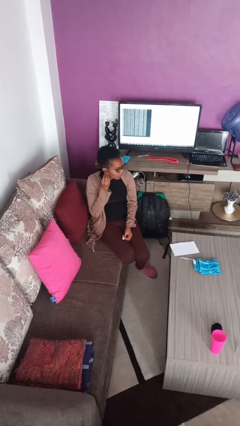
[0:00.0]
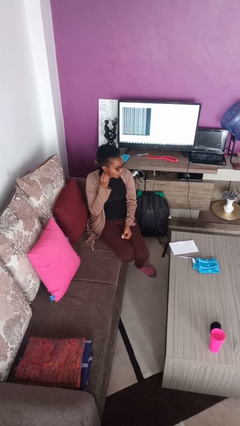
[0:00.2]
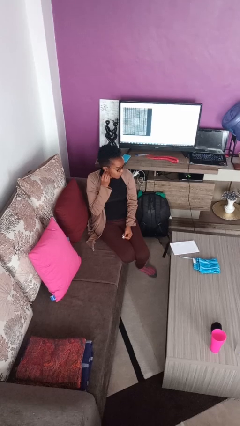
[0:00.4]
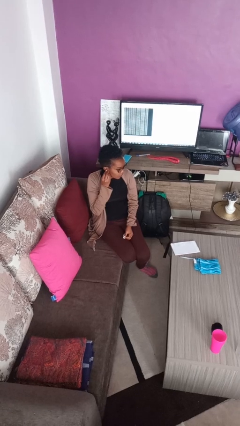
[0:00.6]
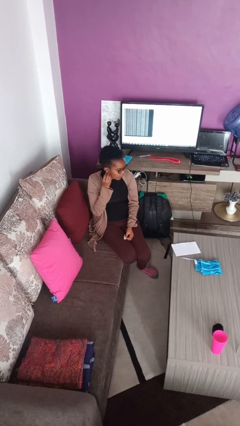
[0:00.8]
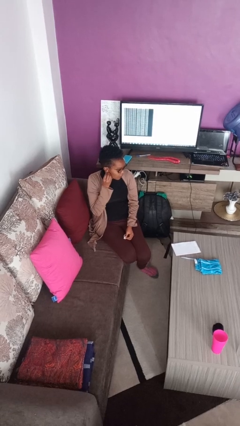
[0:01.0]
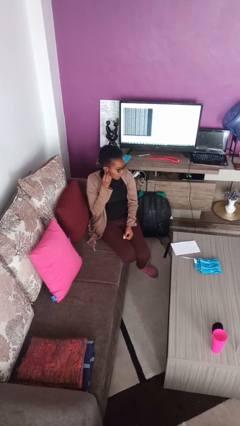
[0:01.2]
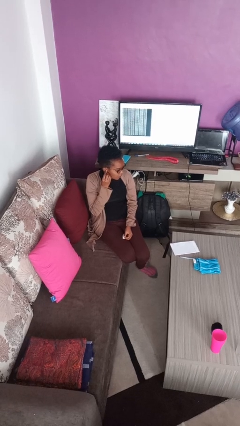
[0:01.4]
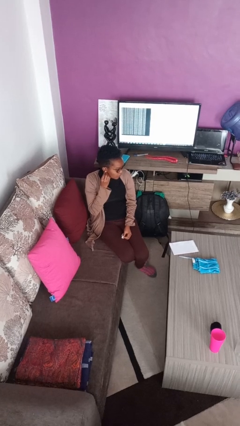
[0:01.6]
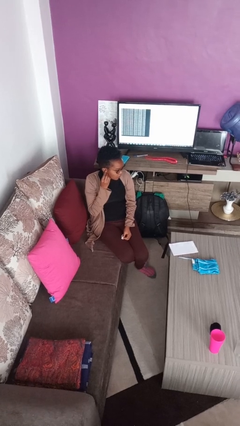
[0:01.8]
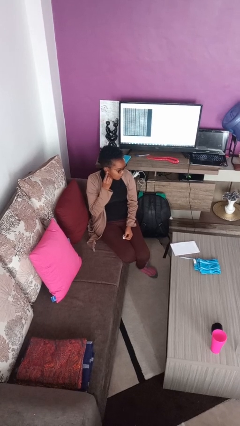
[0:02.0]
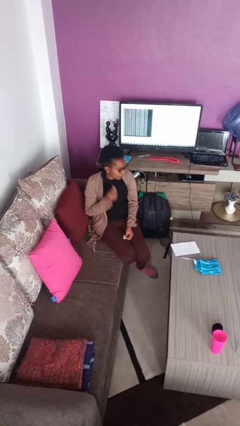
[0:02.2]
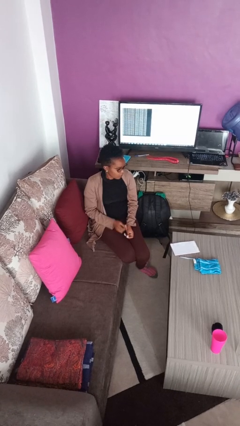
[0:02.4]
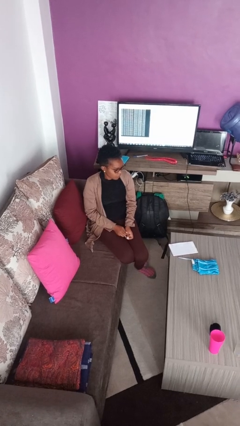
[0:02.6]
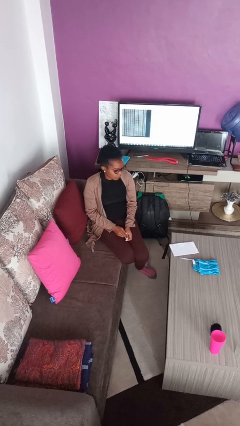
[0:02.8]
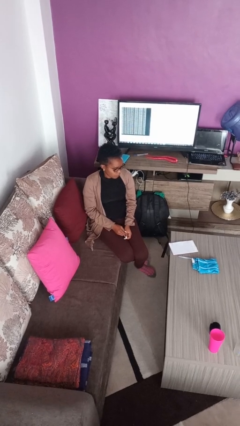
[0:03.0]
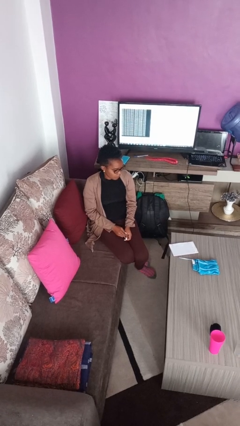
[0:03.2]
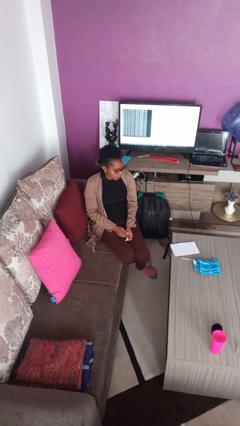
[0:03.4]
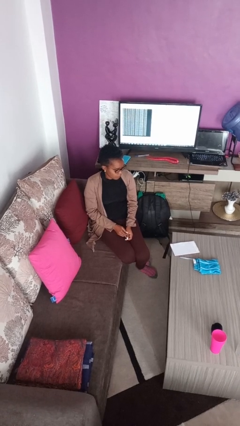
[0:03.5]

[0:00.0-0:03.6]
person puts on earrings

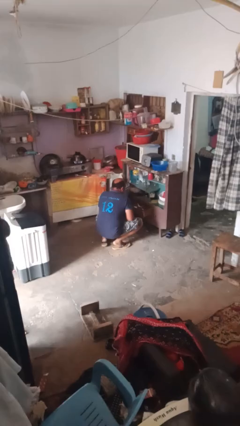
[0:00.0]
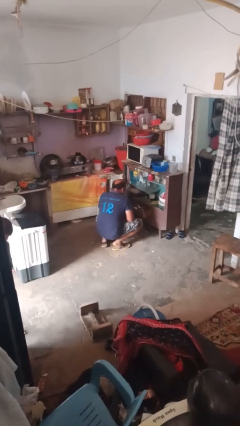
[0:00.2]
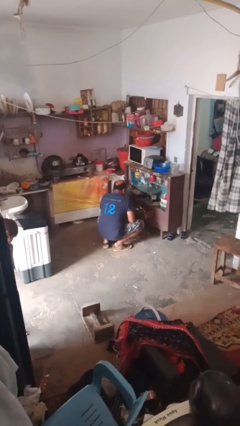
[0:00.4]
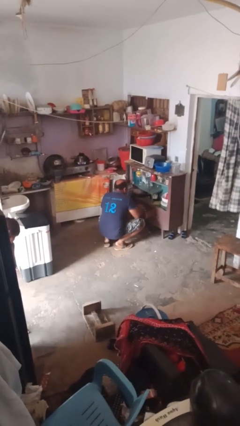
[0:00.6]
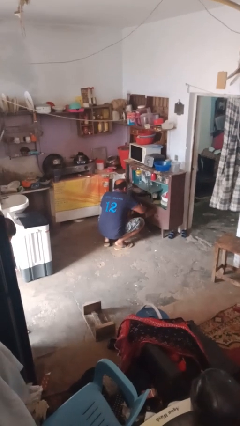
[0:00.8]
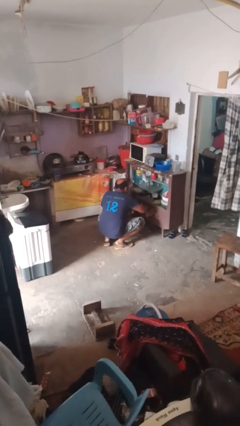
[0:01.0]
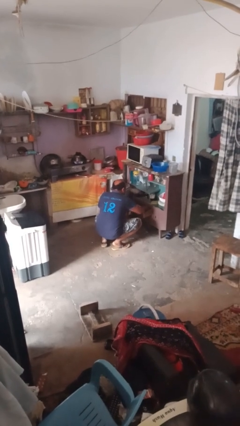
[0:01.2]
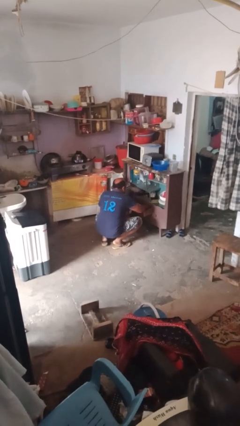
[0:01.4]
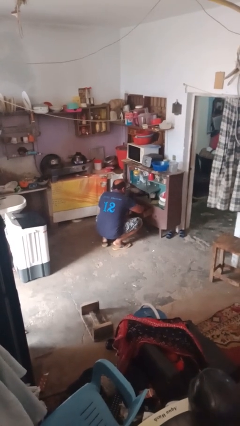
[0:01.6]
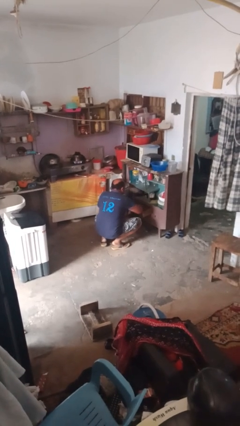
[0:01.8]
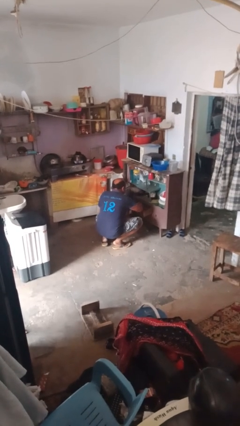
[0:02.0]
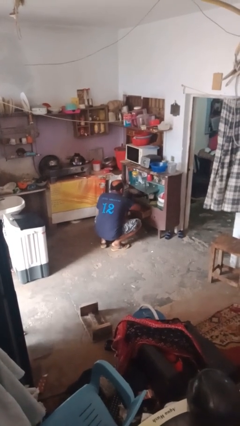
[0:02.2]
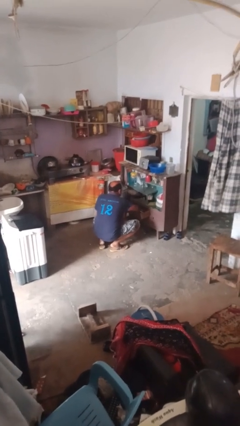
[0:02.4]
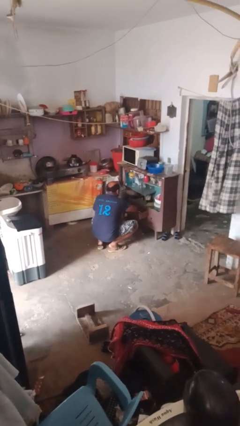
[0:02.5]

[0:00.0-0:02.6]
person searches in kitchen drawer

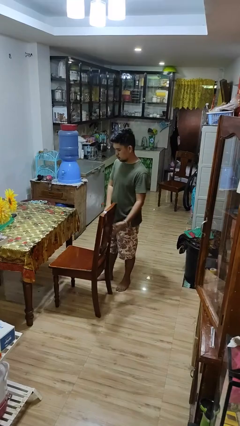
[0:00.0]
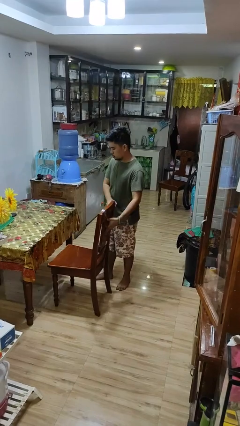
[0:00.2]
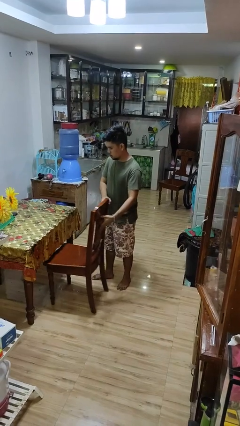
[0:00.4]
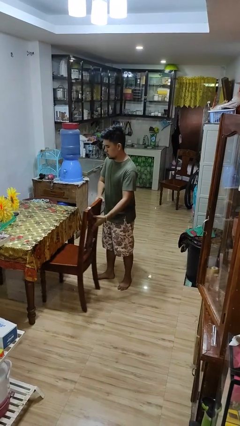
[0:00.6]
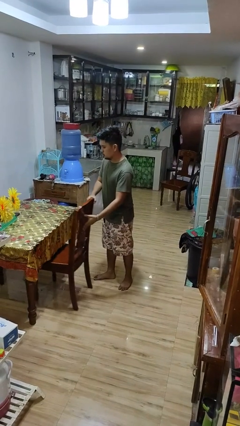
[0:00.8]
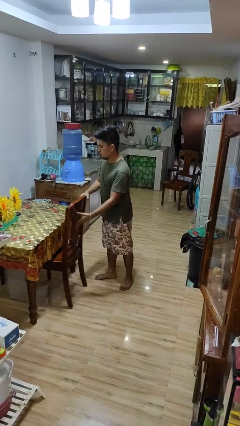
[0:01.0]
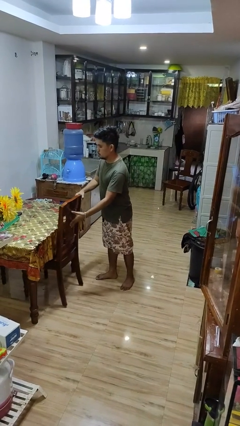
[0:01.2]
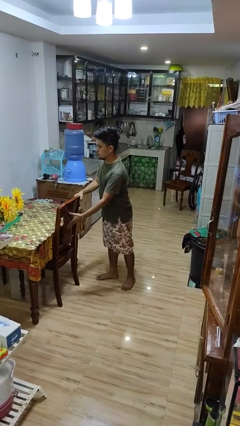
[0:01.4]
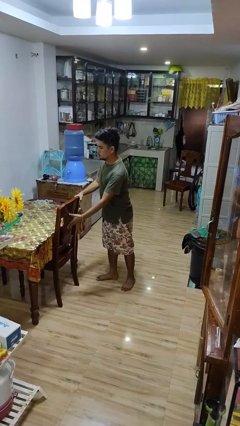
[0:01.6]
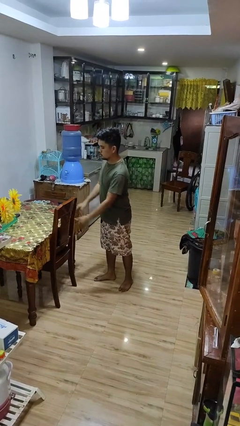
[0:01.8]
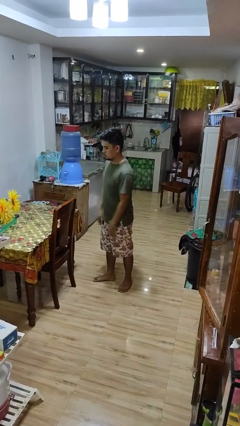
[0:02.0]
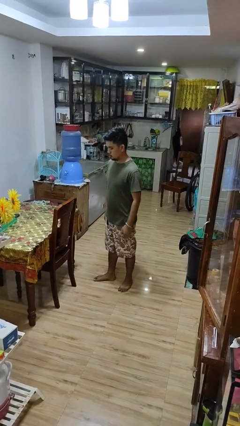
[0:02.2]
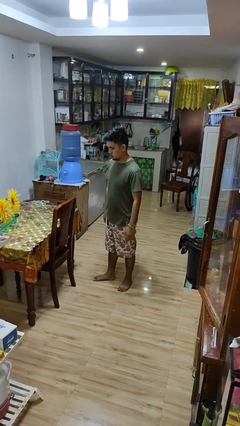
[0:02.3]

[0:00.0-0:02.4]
person pushes in chair

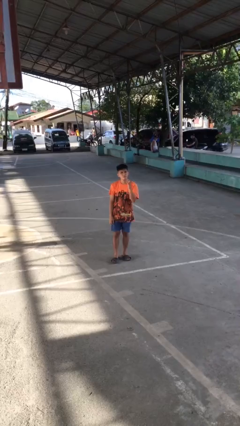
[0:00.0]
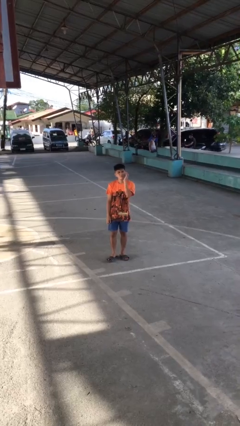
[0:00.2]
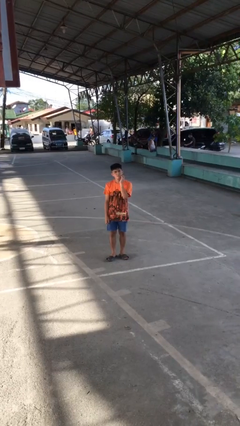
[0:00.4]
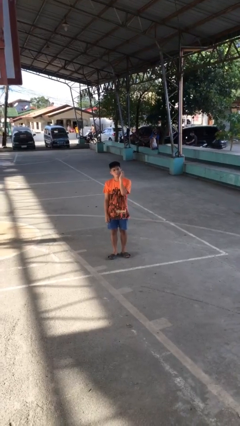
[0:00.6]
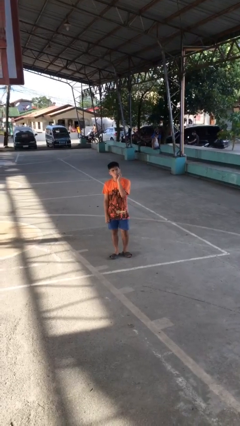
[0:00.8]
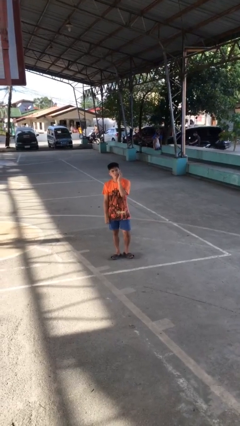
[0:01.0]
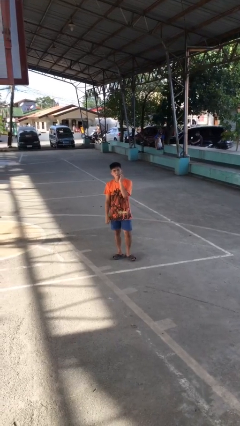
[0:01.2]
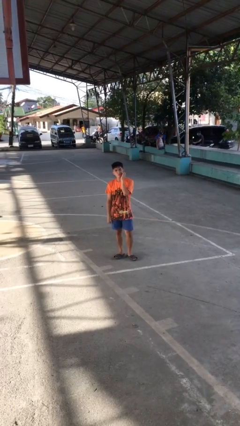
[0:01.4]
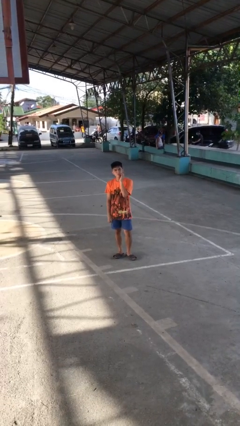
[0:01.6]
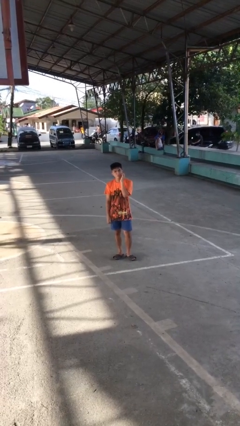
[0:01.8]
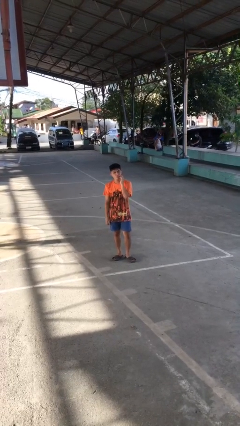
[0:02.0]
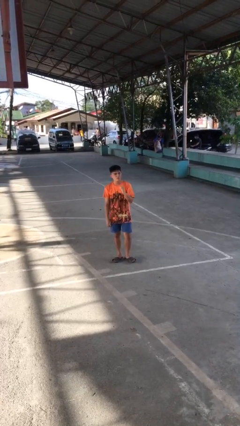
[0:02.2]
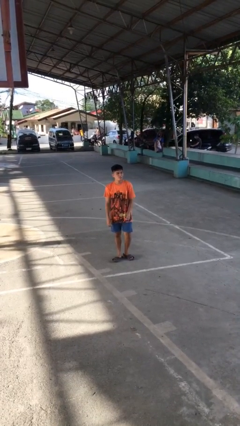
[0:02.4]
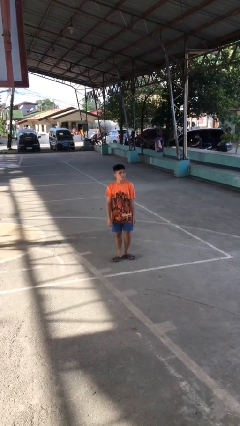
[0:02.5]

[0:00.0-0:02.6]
person scratches face

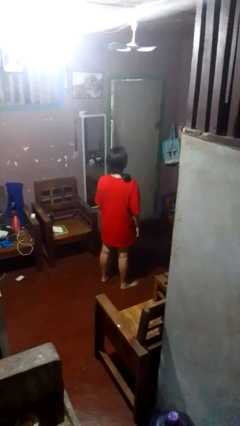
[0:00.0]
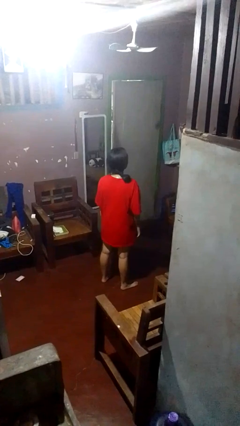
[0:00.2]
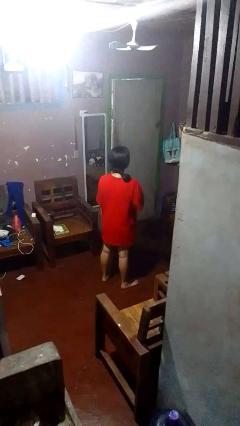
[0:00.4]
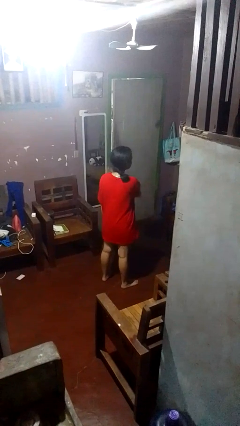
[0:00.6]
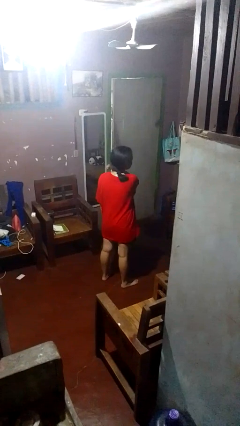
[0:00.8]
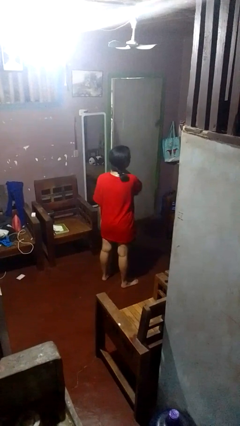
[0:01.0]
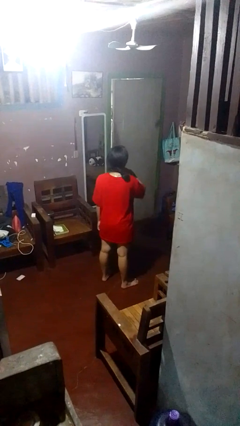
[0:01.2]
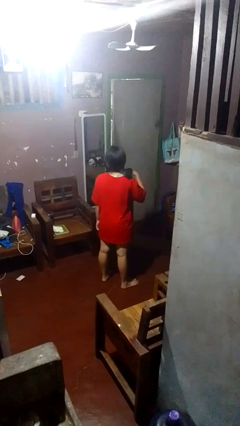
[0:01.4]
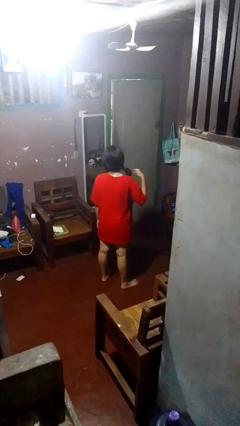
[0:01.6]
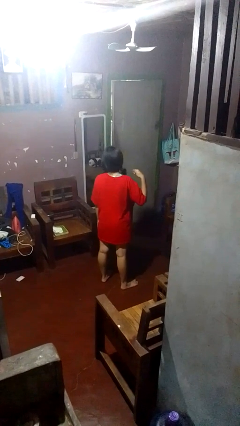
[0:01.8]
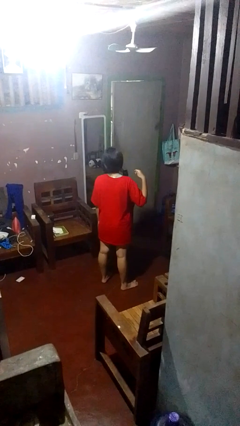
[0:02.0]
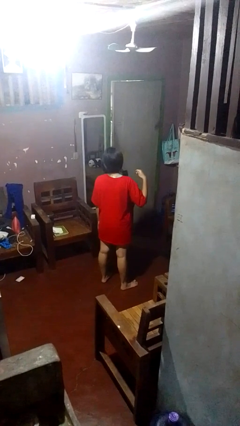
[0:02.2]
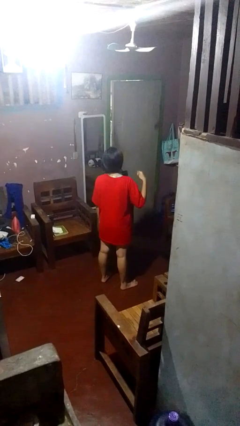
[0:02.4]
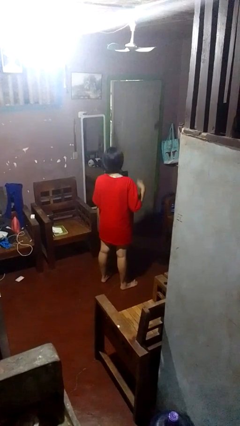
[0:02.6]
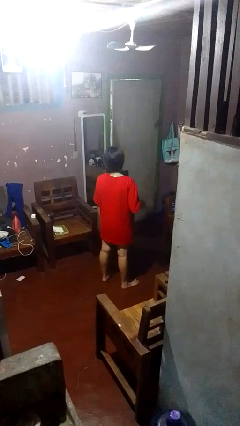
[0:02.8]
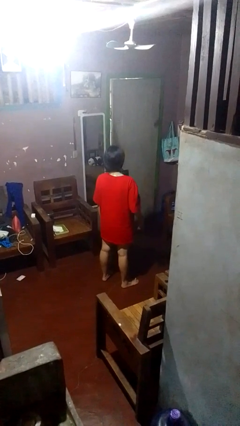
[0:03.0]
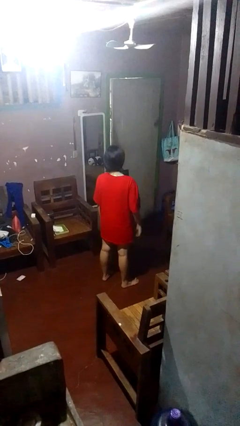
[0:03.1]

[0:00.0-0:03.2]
person gestures cut

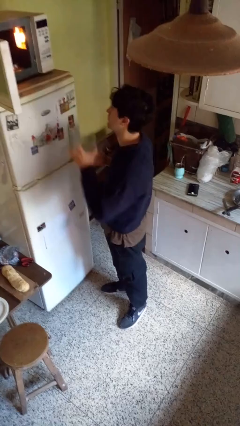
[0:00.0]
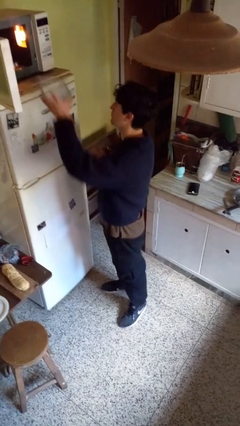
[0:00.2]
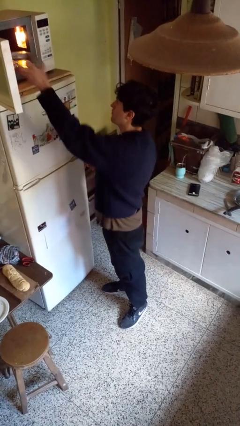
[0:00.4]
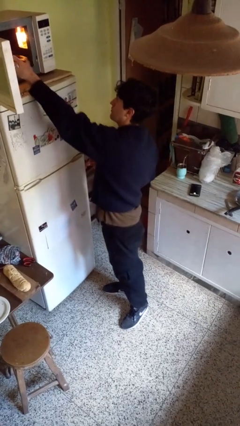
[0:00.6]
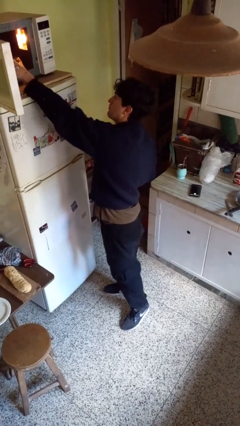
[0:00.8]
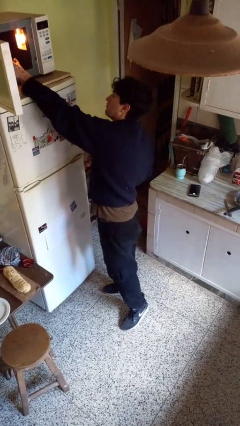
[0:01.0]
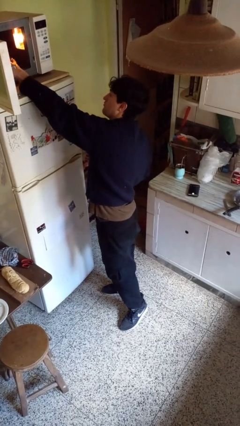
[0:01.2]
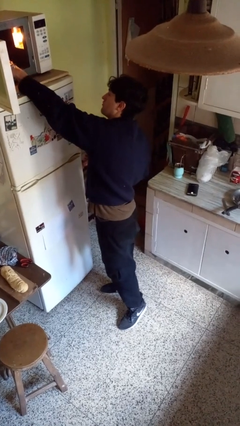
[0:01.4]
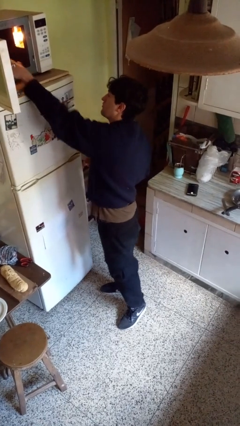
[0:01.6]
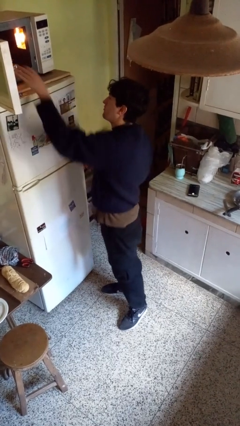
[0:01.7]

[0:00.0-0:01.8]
person puts object into microwave

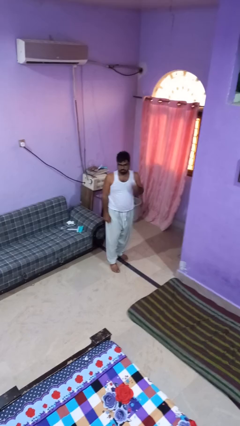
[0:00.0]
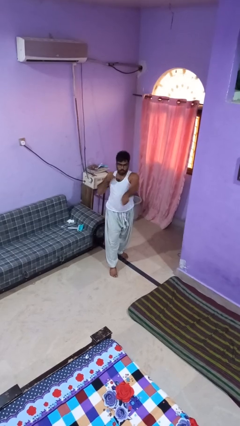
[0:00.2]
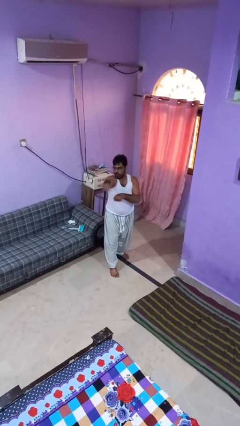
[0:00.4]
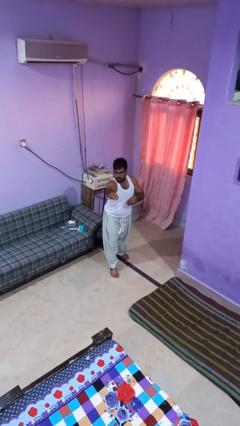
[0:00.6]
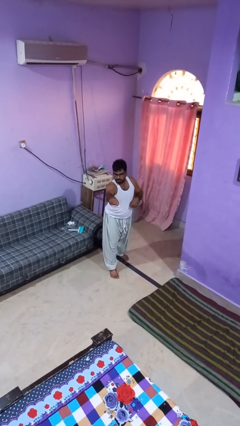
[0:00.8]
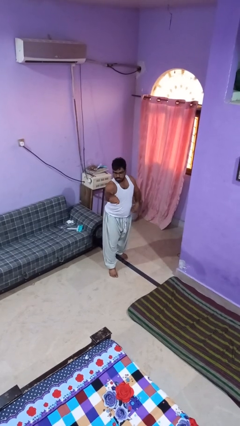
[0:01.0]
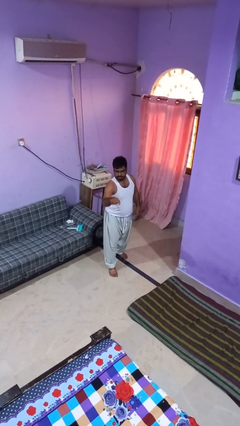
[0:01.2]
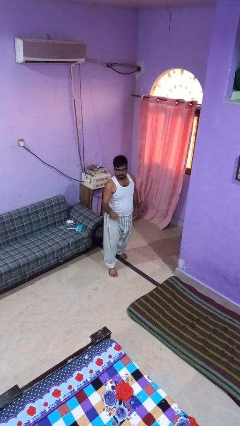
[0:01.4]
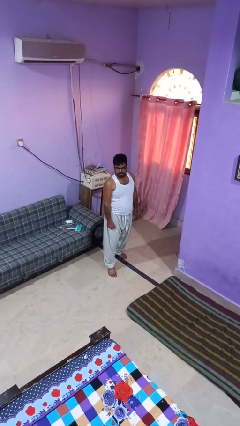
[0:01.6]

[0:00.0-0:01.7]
person punches
